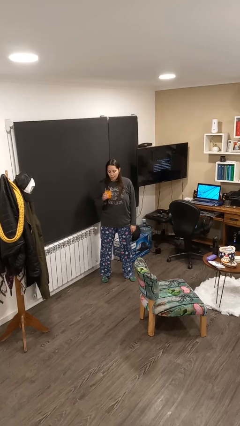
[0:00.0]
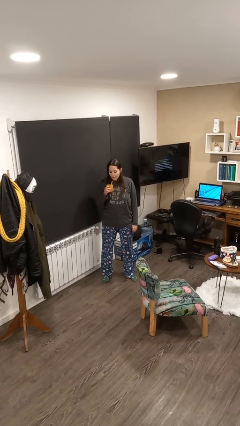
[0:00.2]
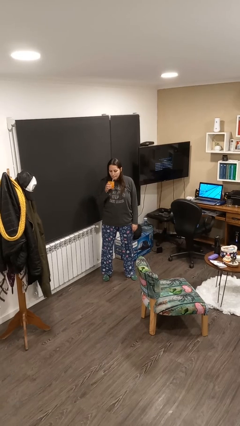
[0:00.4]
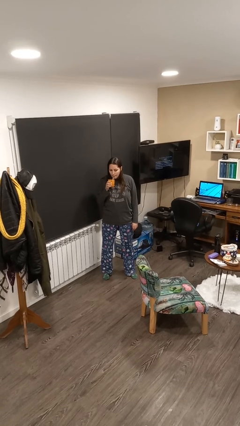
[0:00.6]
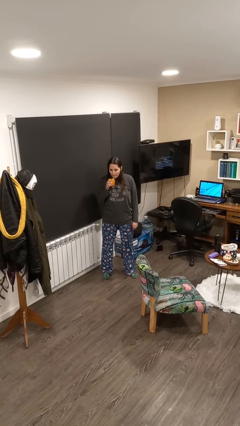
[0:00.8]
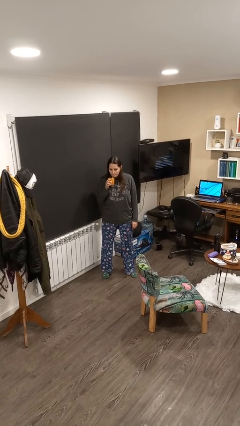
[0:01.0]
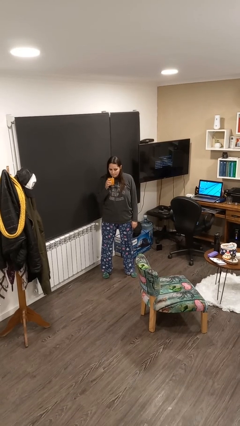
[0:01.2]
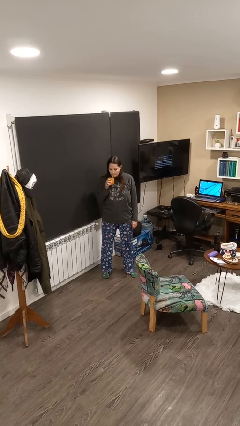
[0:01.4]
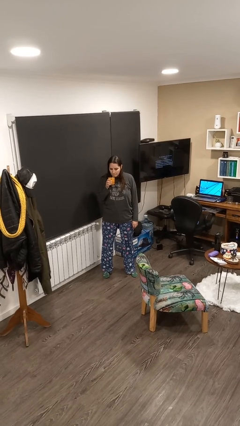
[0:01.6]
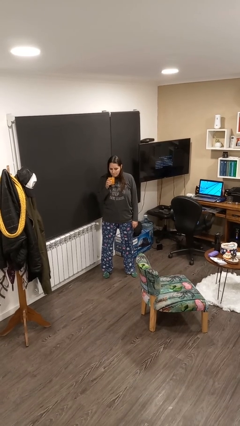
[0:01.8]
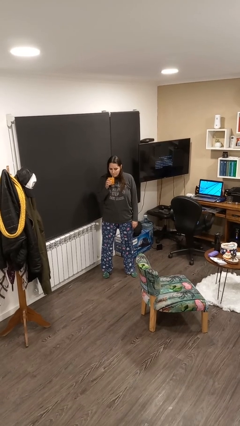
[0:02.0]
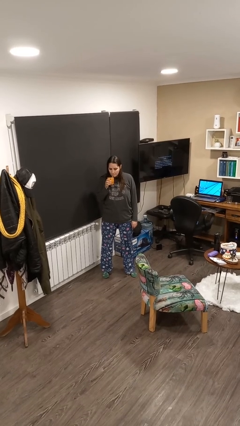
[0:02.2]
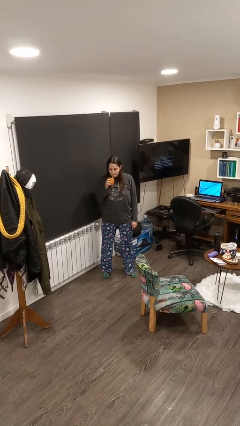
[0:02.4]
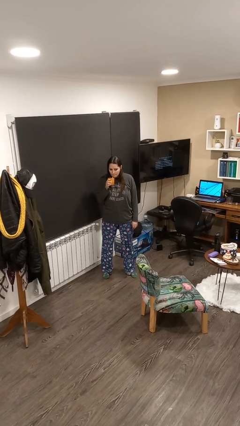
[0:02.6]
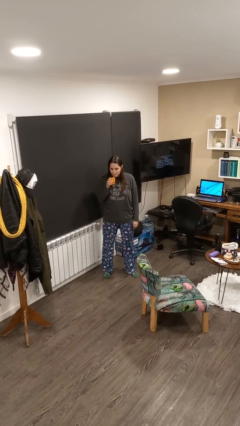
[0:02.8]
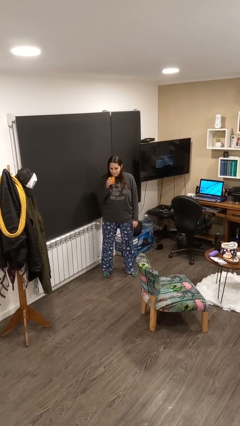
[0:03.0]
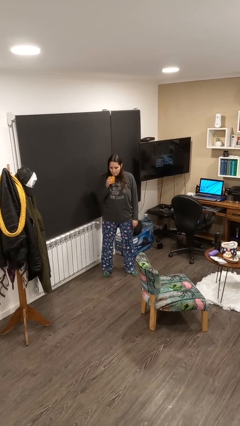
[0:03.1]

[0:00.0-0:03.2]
person drinks from straw

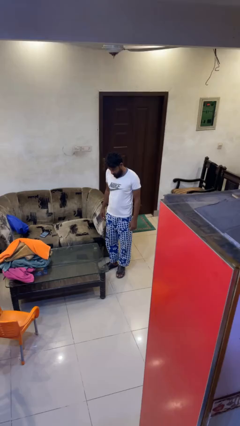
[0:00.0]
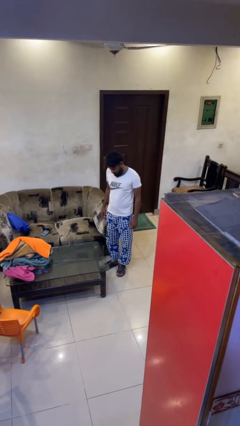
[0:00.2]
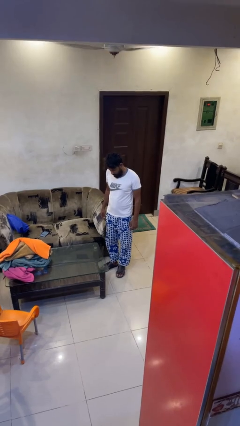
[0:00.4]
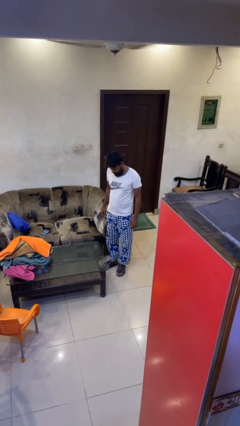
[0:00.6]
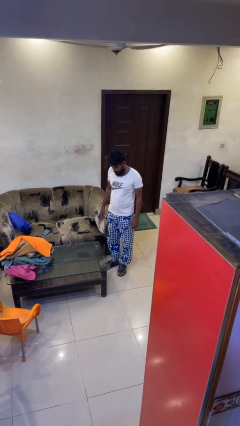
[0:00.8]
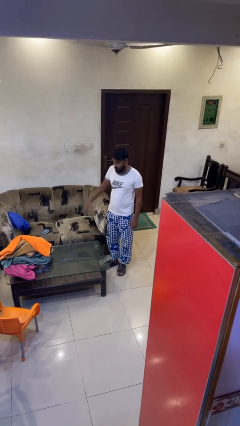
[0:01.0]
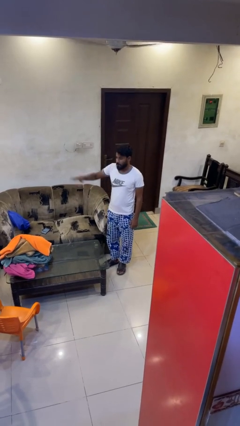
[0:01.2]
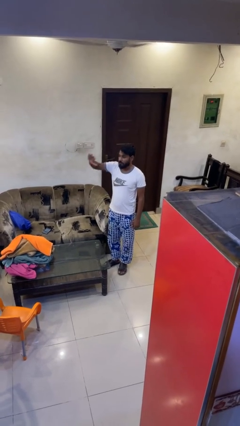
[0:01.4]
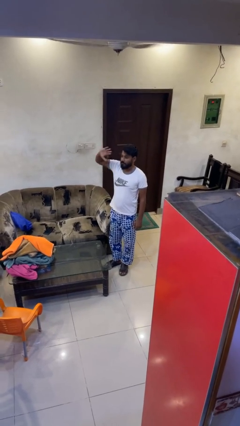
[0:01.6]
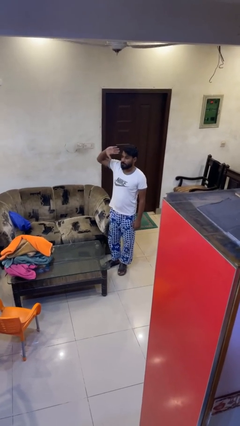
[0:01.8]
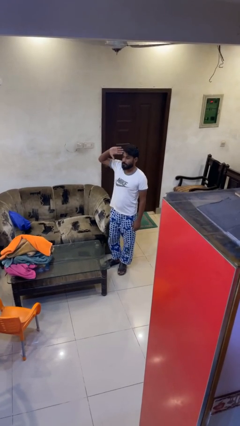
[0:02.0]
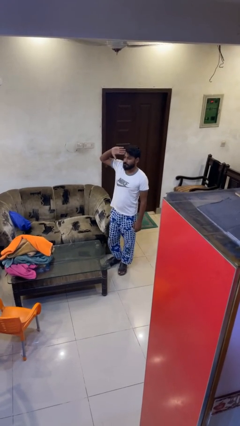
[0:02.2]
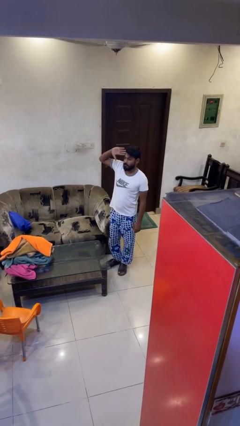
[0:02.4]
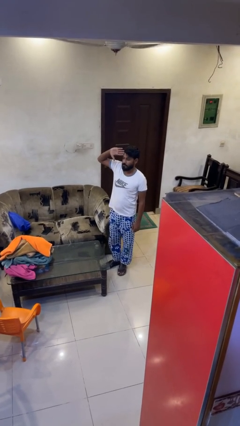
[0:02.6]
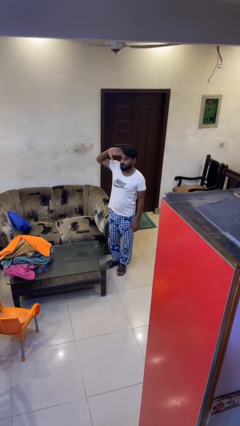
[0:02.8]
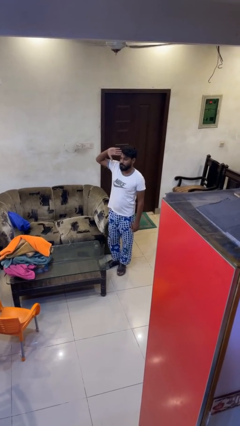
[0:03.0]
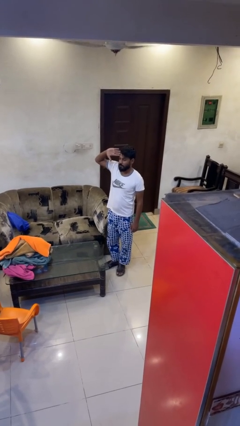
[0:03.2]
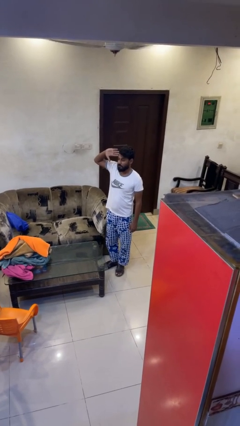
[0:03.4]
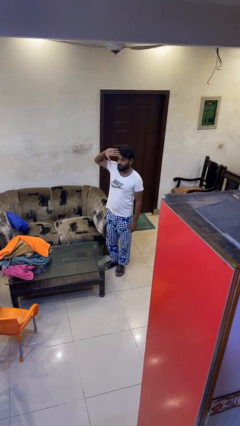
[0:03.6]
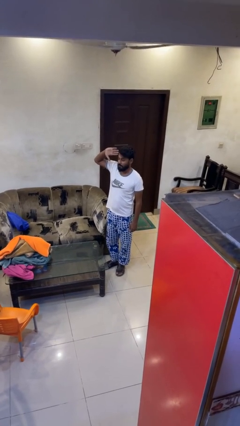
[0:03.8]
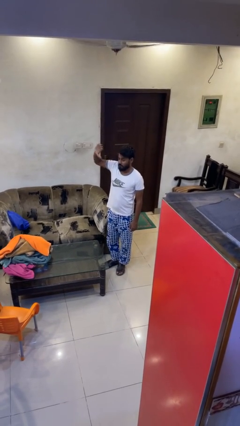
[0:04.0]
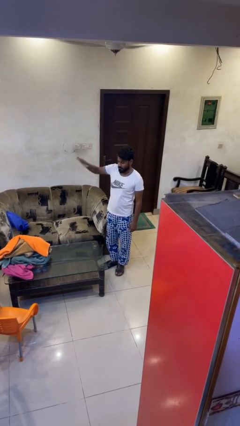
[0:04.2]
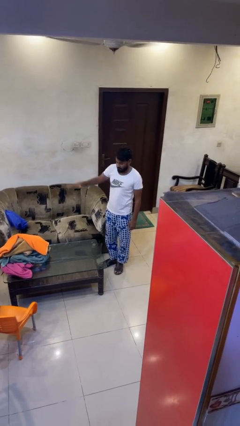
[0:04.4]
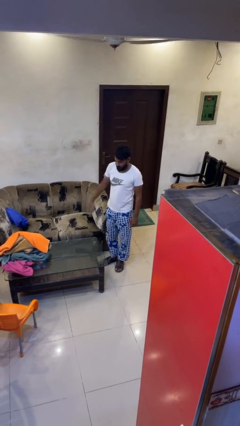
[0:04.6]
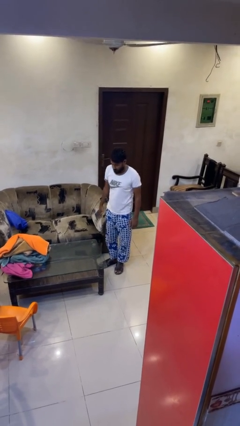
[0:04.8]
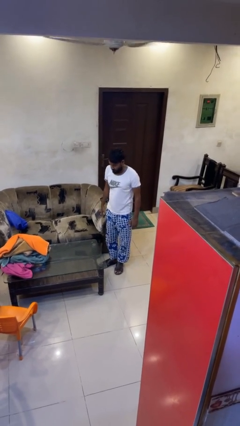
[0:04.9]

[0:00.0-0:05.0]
person salutes

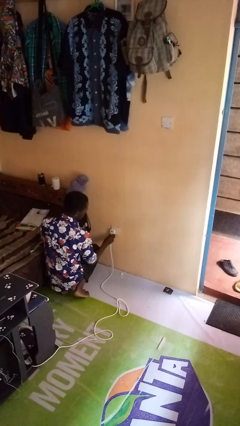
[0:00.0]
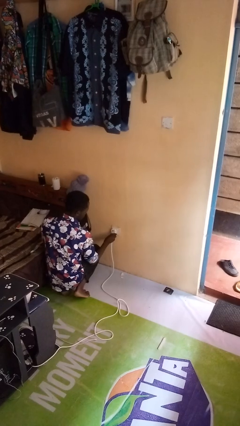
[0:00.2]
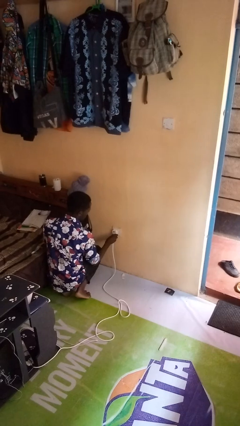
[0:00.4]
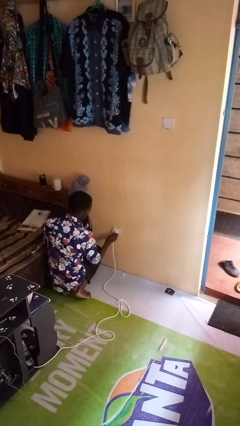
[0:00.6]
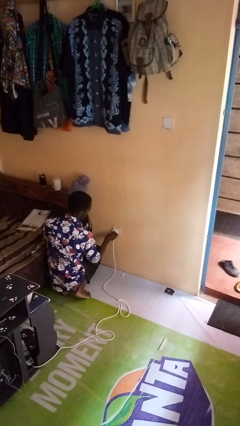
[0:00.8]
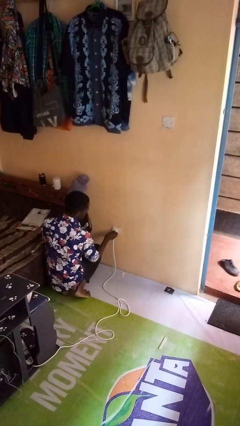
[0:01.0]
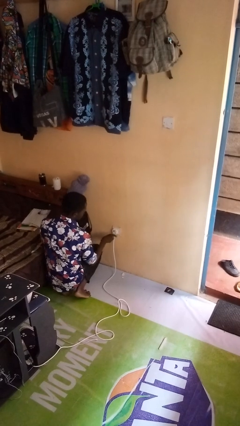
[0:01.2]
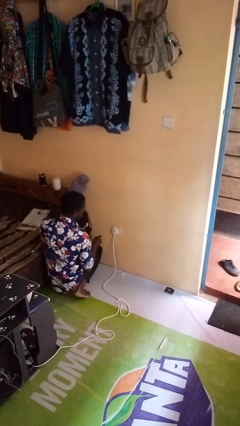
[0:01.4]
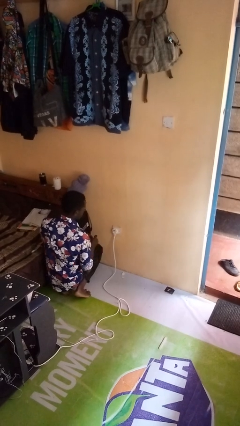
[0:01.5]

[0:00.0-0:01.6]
person plugs into electrical socket

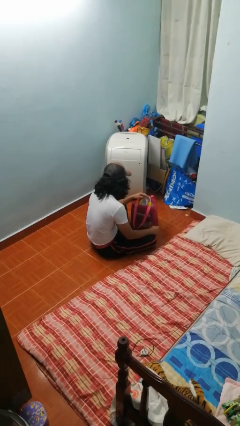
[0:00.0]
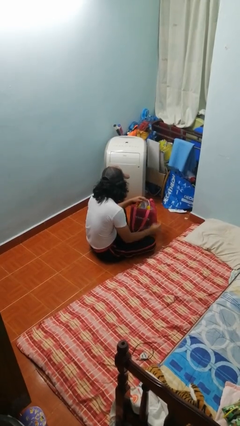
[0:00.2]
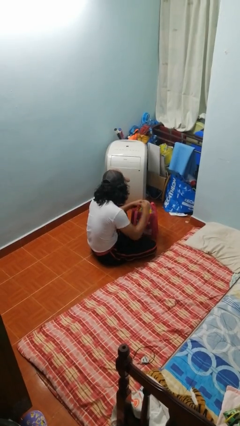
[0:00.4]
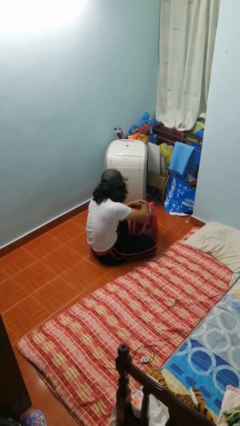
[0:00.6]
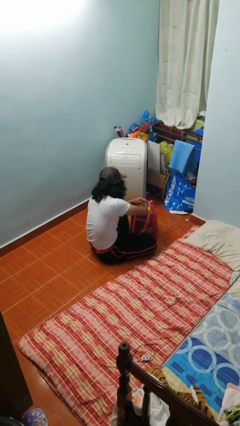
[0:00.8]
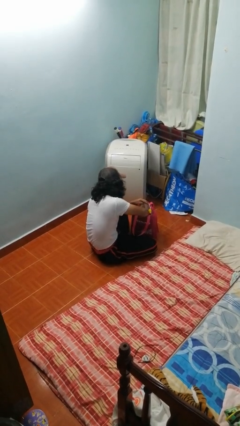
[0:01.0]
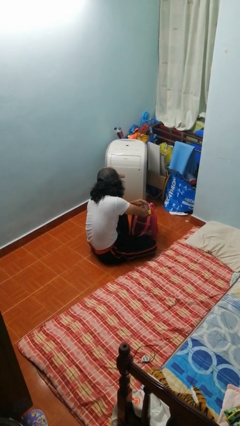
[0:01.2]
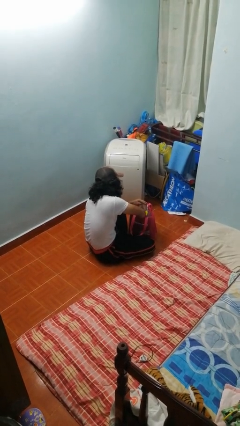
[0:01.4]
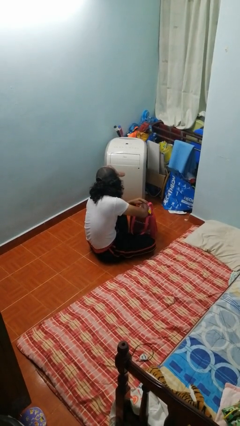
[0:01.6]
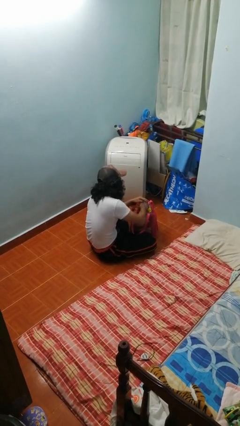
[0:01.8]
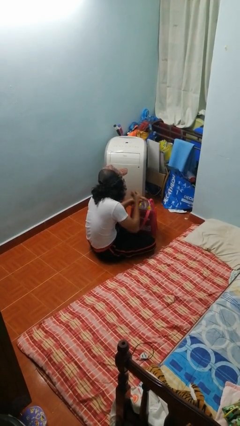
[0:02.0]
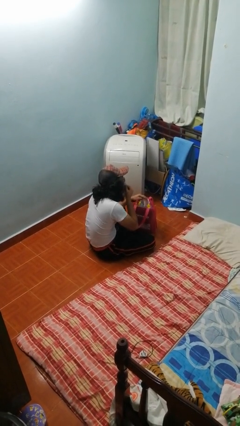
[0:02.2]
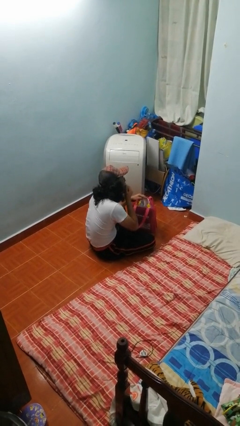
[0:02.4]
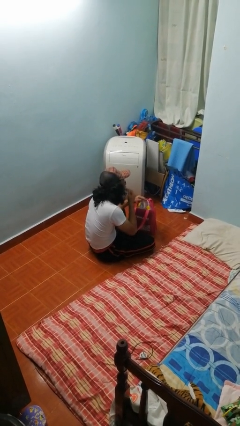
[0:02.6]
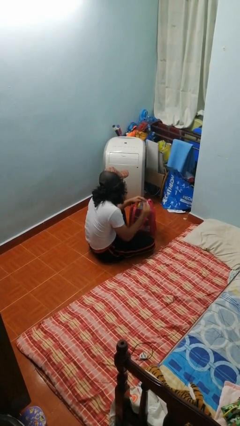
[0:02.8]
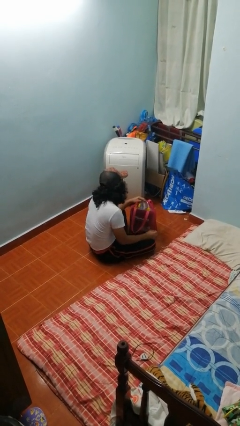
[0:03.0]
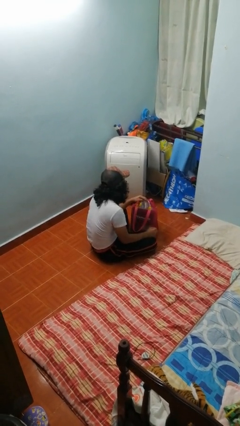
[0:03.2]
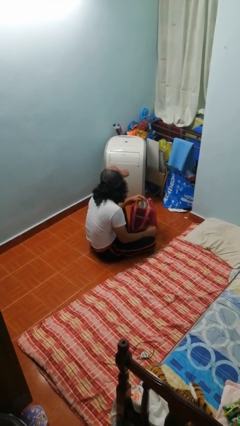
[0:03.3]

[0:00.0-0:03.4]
person eats snack from bag

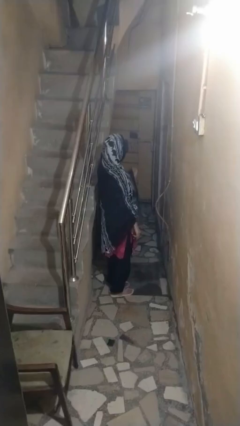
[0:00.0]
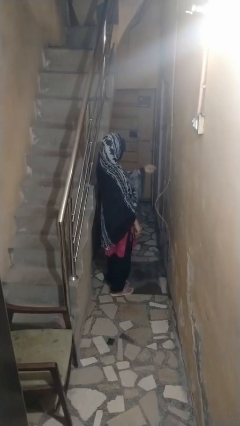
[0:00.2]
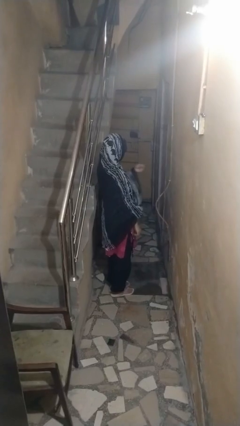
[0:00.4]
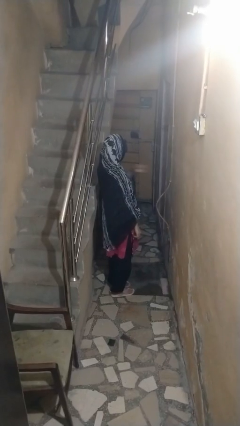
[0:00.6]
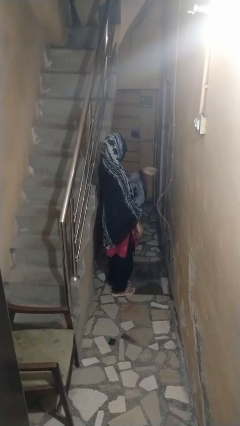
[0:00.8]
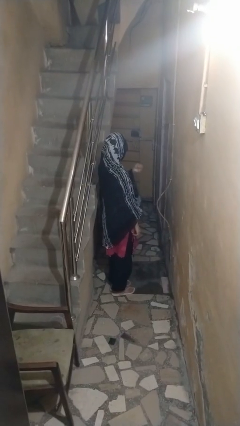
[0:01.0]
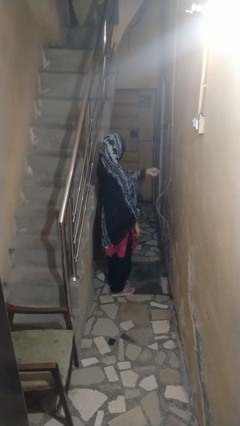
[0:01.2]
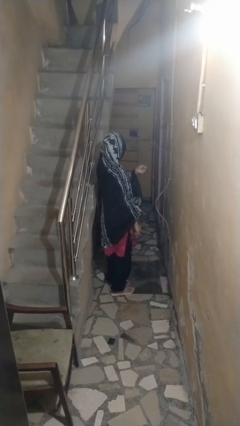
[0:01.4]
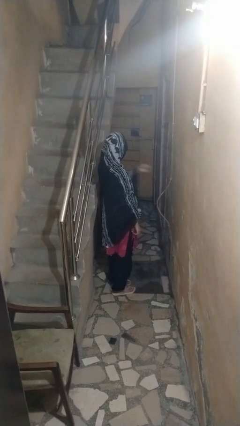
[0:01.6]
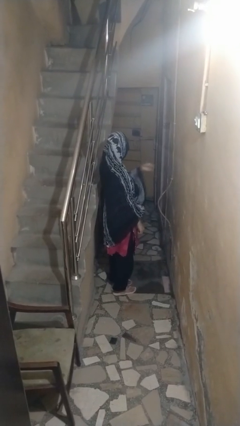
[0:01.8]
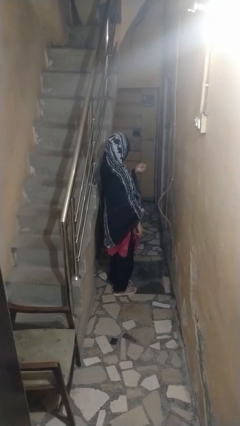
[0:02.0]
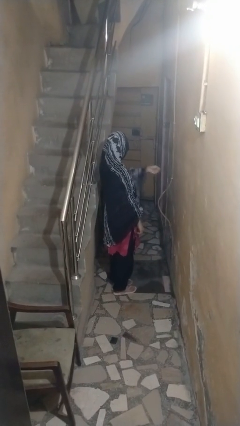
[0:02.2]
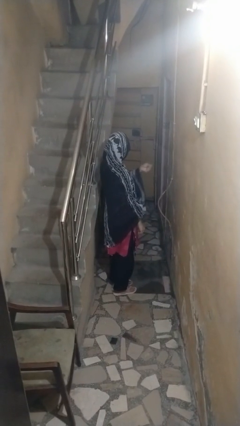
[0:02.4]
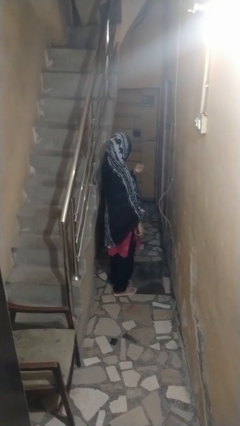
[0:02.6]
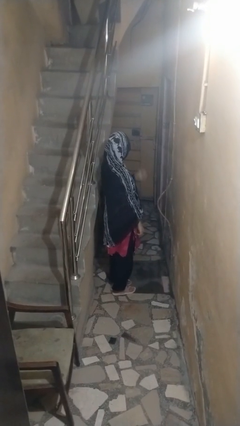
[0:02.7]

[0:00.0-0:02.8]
person punches

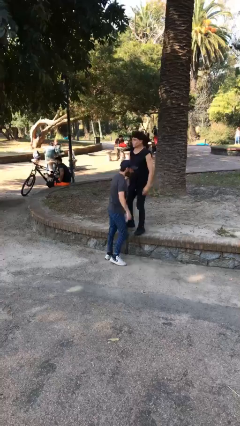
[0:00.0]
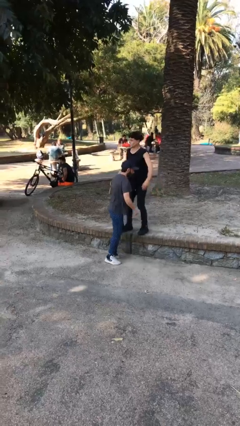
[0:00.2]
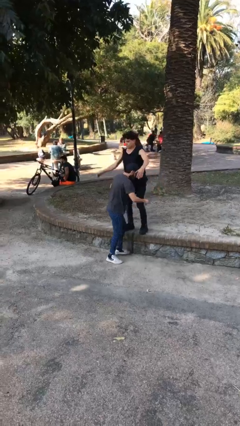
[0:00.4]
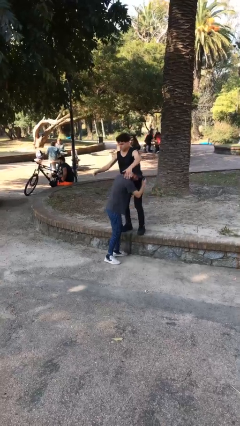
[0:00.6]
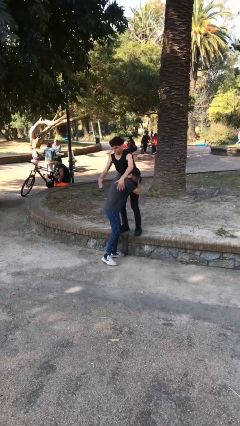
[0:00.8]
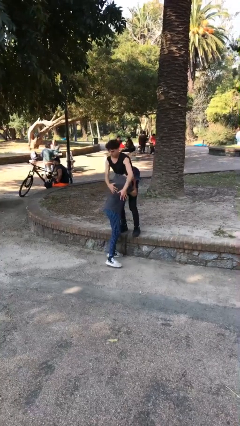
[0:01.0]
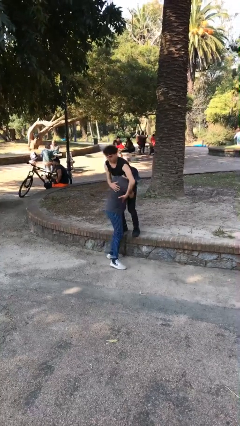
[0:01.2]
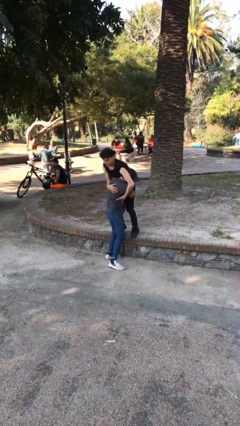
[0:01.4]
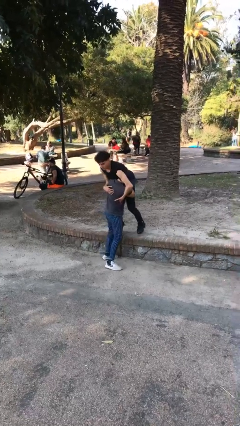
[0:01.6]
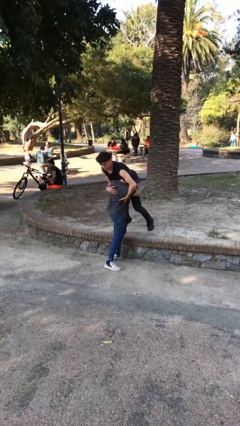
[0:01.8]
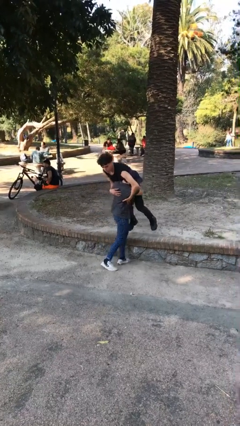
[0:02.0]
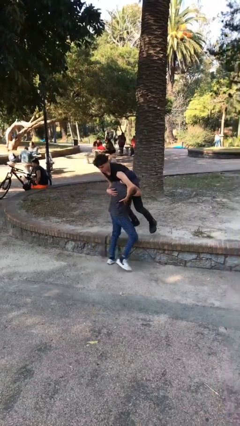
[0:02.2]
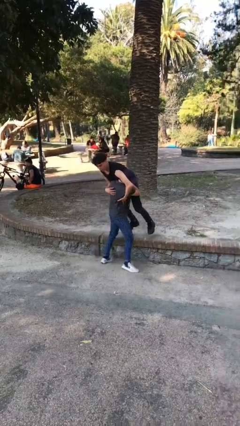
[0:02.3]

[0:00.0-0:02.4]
person carries person over shoulder
